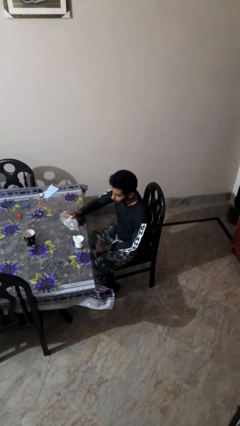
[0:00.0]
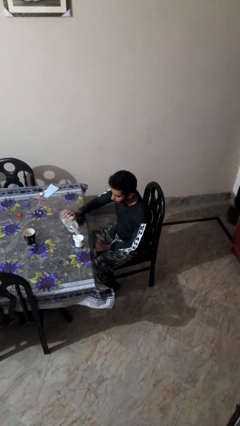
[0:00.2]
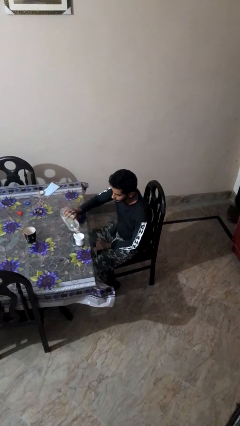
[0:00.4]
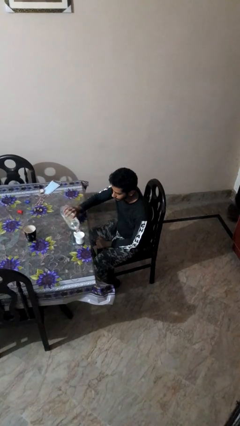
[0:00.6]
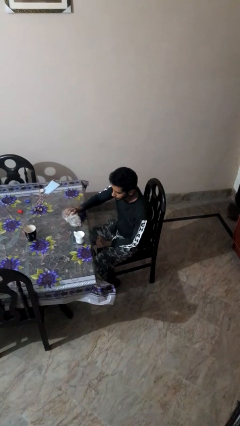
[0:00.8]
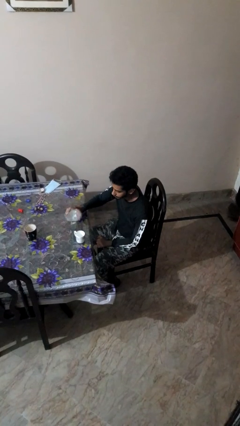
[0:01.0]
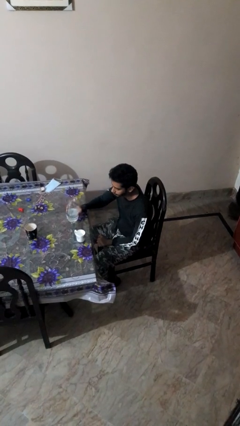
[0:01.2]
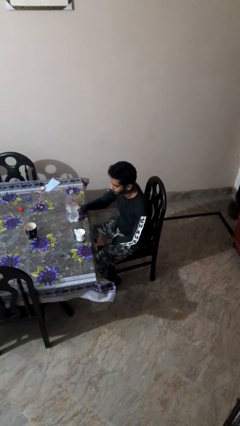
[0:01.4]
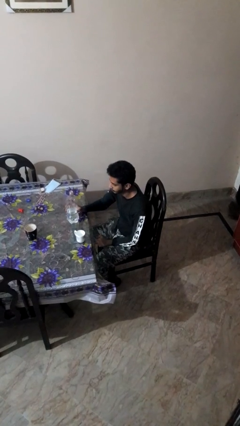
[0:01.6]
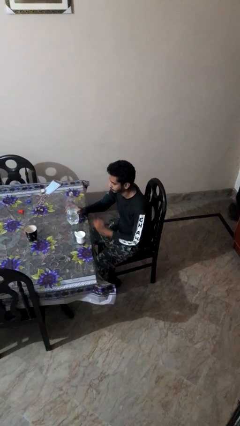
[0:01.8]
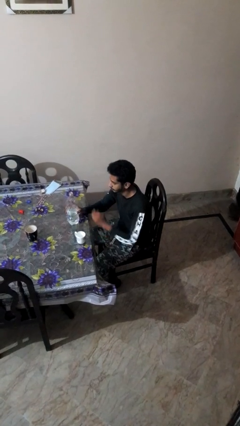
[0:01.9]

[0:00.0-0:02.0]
person pours liquid into cup

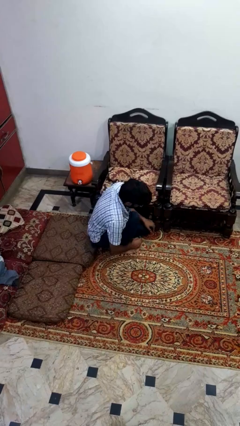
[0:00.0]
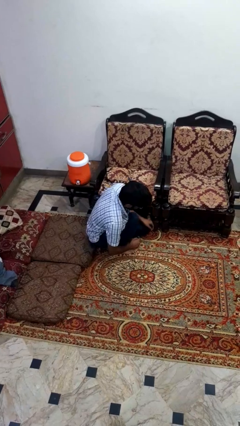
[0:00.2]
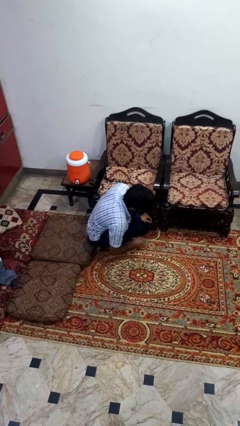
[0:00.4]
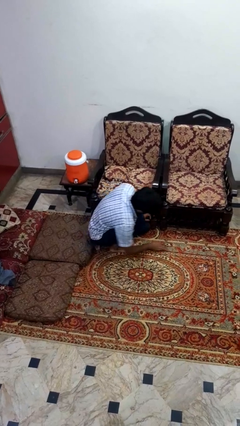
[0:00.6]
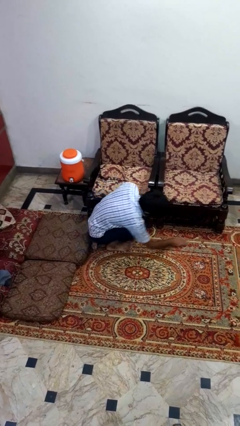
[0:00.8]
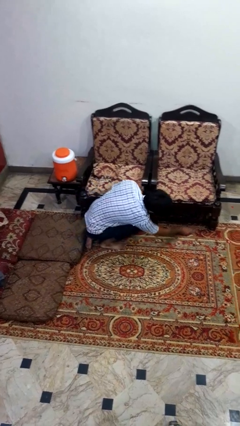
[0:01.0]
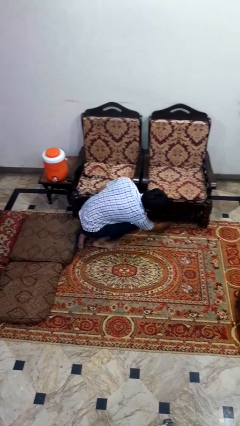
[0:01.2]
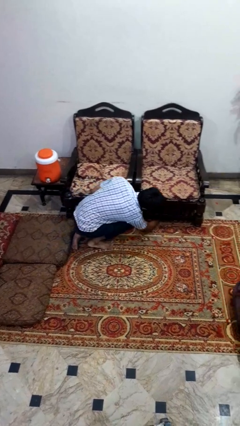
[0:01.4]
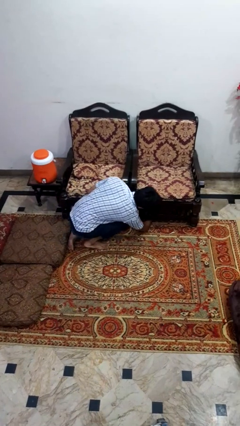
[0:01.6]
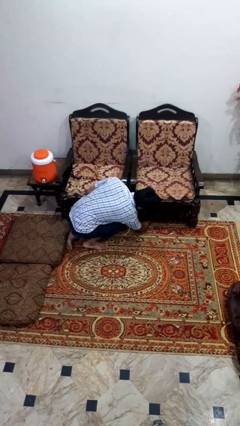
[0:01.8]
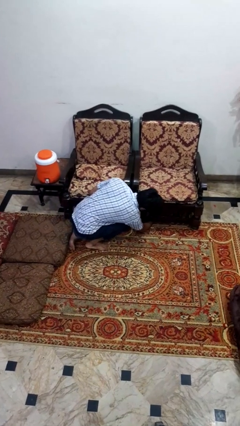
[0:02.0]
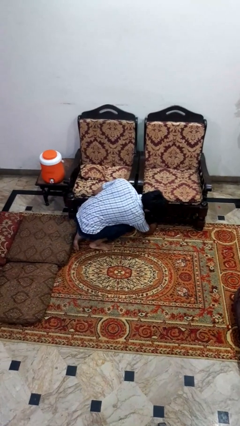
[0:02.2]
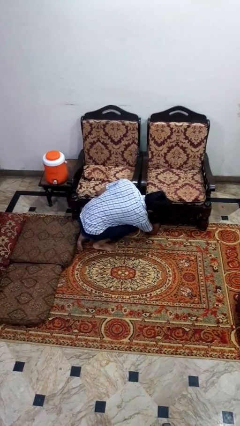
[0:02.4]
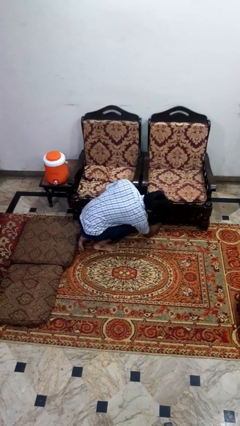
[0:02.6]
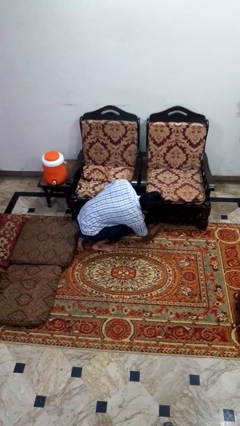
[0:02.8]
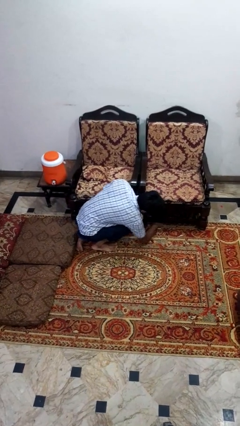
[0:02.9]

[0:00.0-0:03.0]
person searches under couch

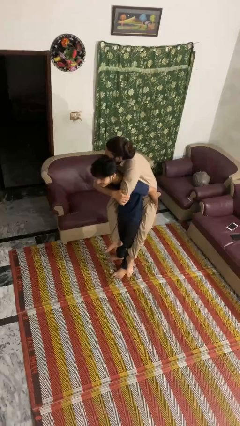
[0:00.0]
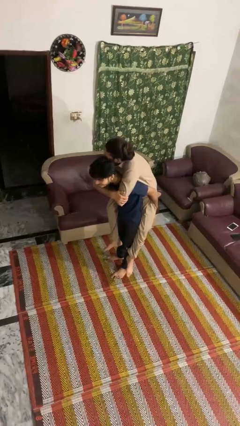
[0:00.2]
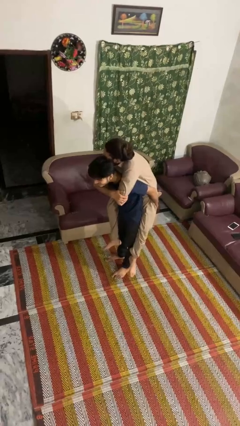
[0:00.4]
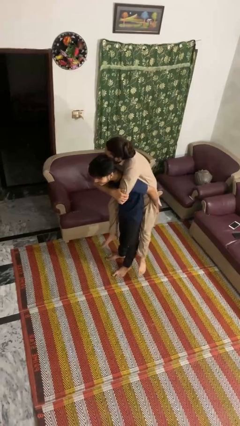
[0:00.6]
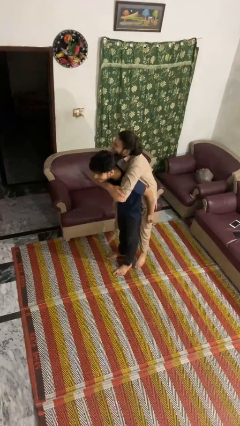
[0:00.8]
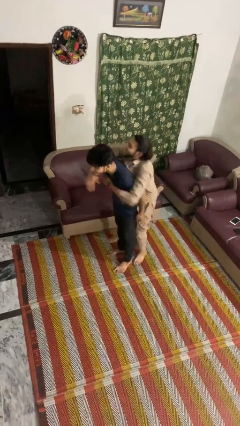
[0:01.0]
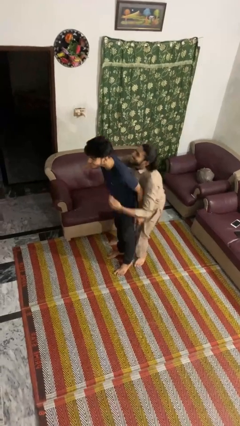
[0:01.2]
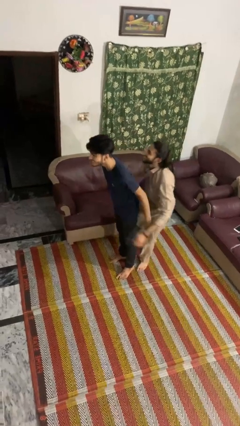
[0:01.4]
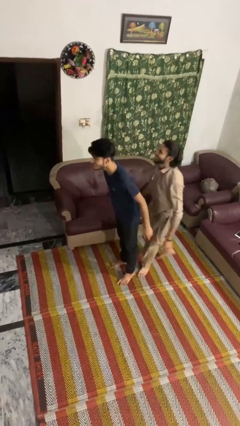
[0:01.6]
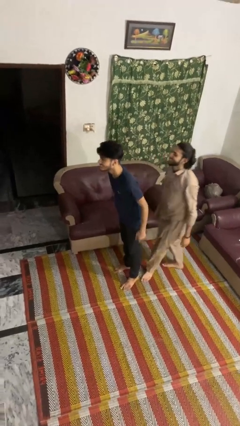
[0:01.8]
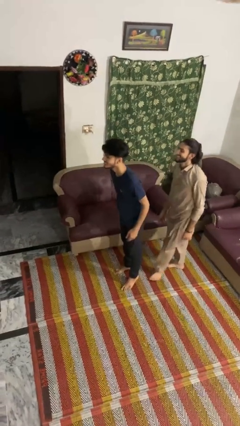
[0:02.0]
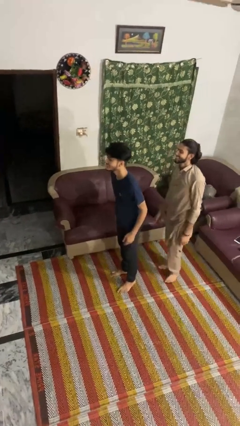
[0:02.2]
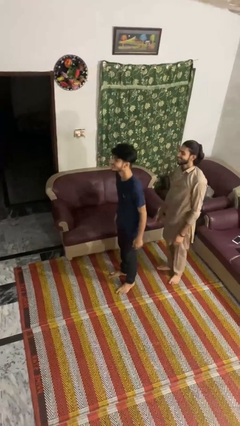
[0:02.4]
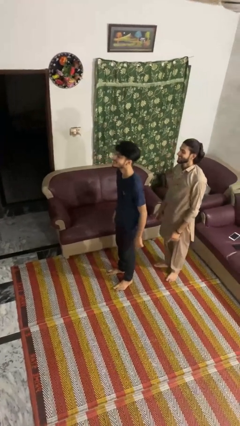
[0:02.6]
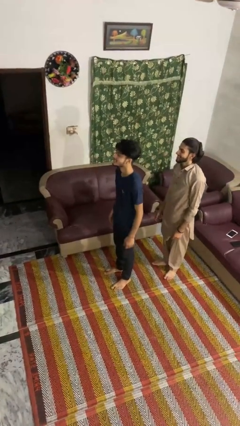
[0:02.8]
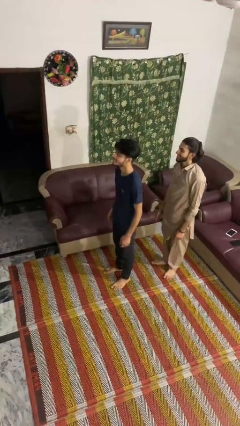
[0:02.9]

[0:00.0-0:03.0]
person puts down person

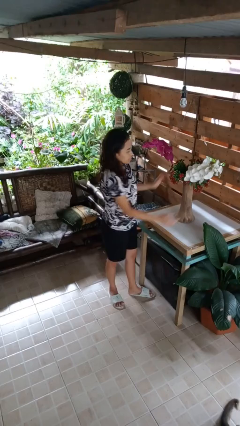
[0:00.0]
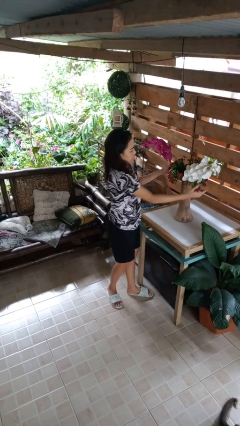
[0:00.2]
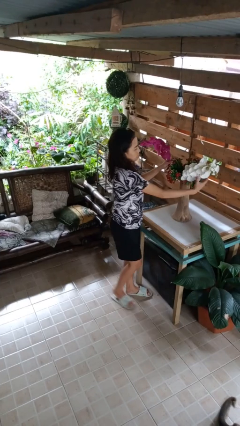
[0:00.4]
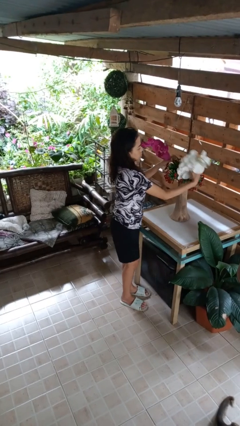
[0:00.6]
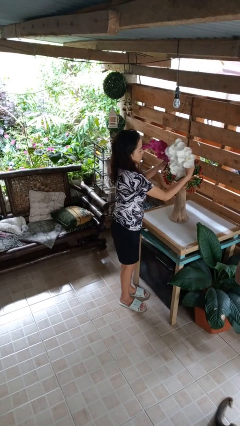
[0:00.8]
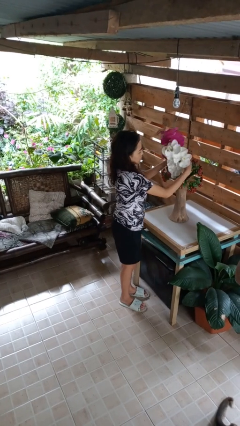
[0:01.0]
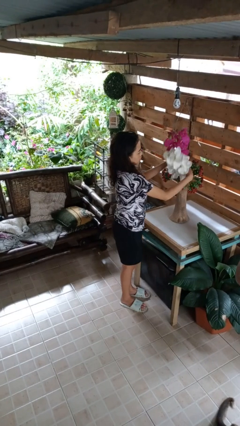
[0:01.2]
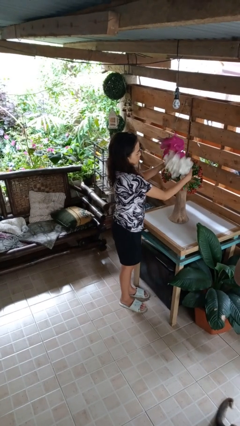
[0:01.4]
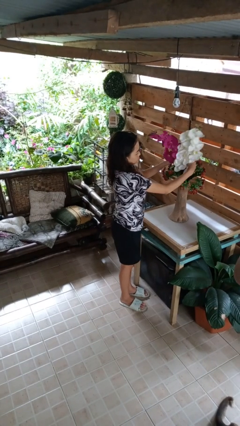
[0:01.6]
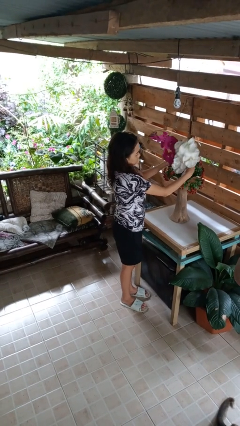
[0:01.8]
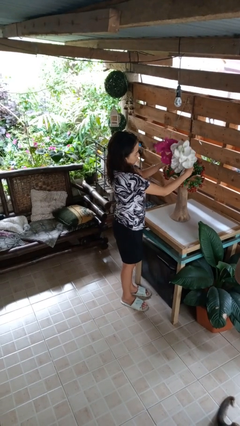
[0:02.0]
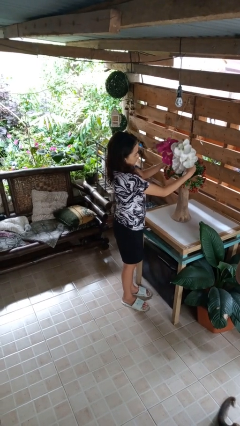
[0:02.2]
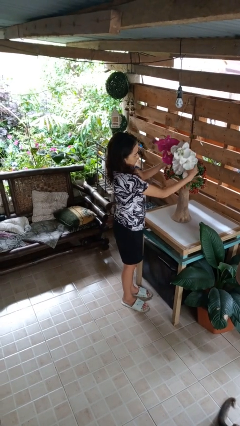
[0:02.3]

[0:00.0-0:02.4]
person arranges flowers in vase

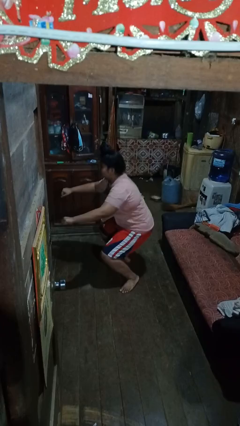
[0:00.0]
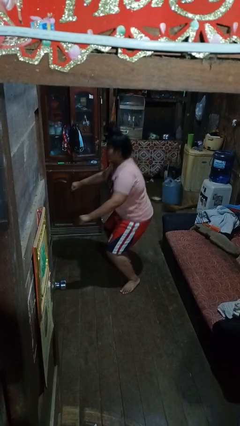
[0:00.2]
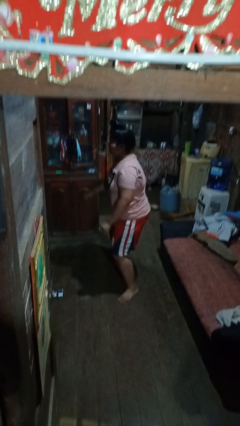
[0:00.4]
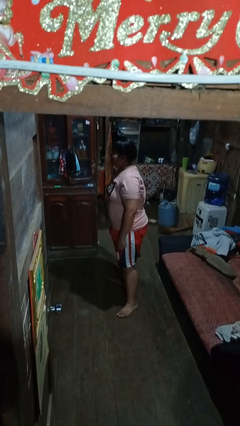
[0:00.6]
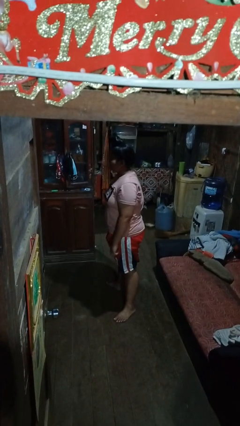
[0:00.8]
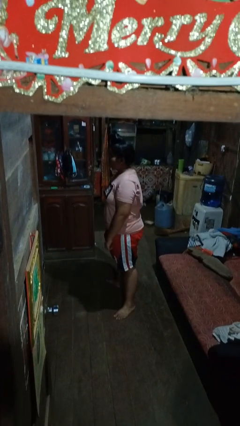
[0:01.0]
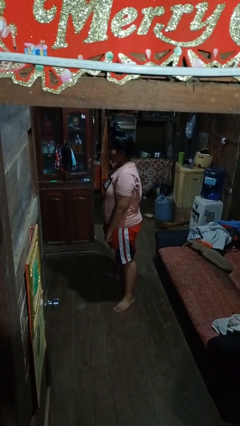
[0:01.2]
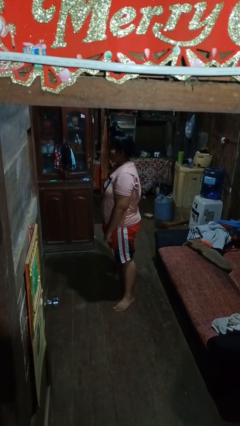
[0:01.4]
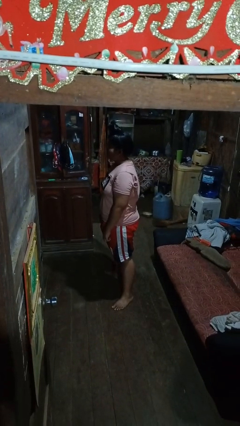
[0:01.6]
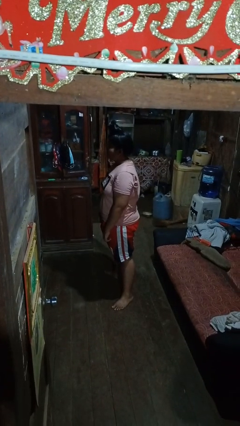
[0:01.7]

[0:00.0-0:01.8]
person stands up

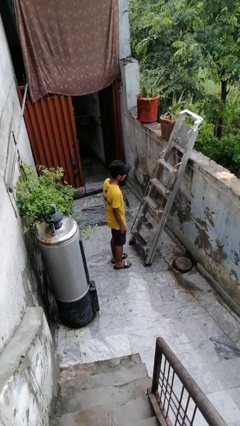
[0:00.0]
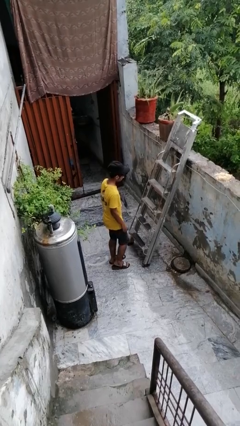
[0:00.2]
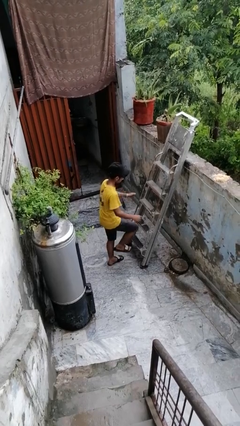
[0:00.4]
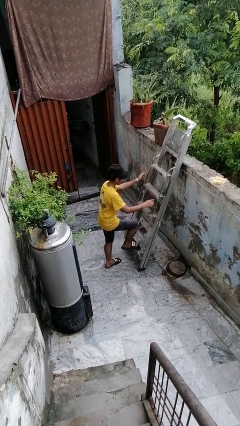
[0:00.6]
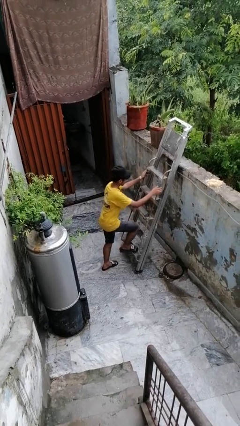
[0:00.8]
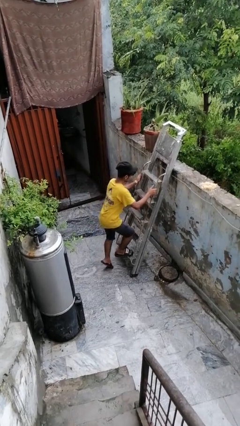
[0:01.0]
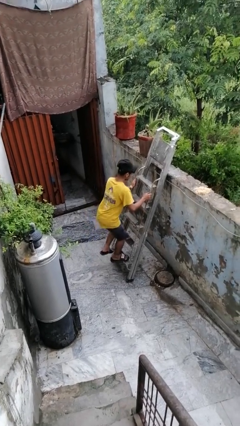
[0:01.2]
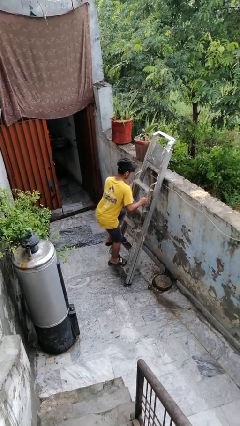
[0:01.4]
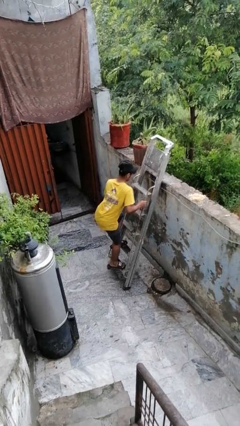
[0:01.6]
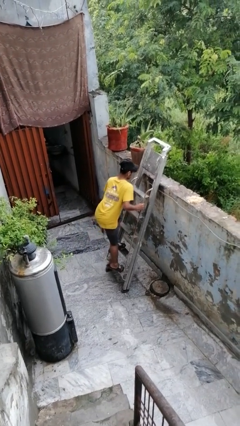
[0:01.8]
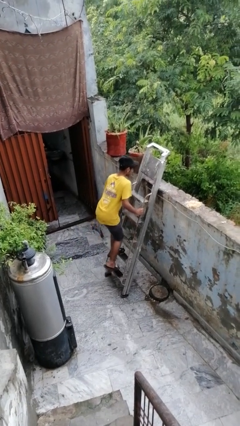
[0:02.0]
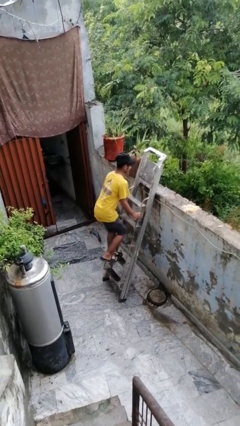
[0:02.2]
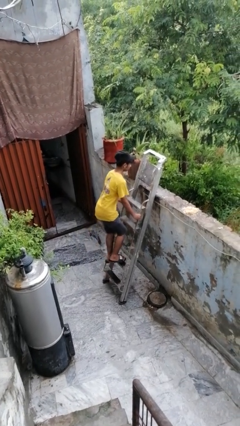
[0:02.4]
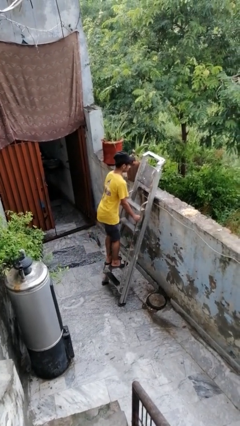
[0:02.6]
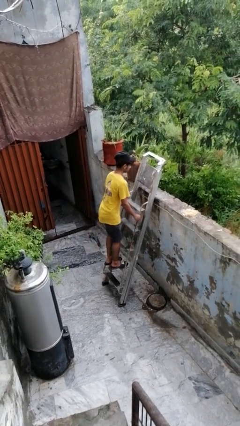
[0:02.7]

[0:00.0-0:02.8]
person climbs up ladder

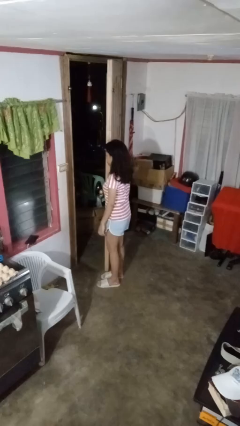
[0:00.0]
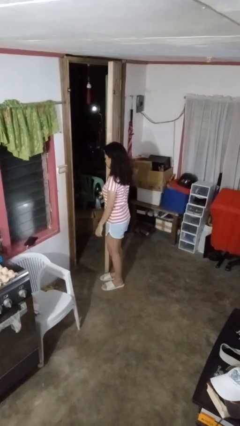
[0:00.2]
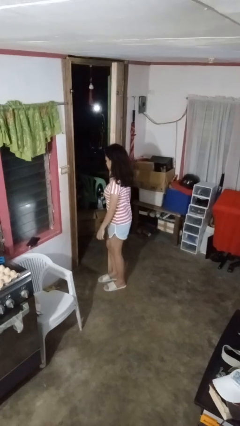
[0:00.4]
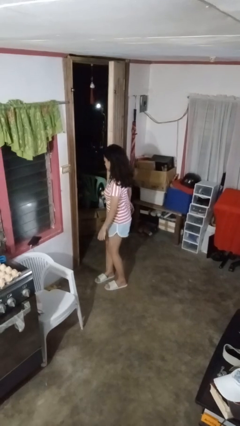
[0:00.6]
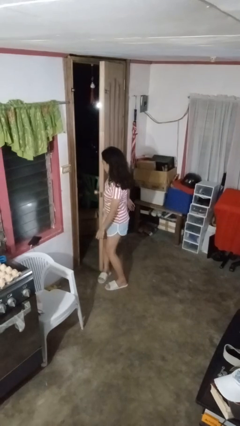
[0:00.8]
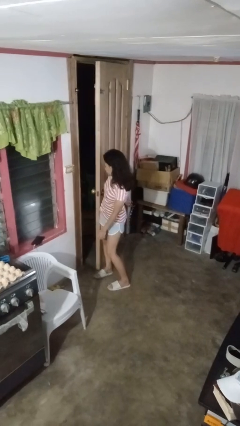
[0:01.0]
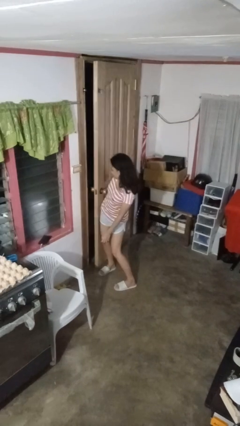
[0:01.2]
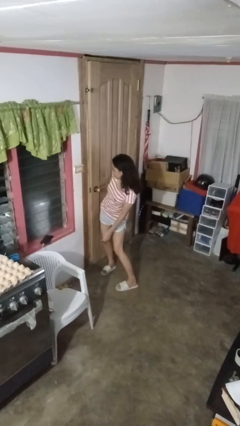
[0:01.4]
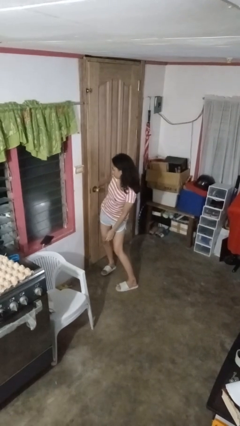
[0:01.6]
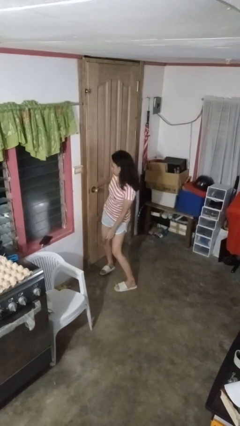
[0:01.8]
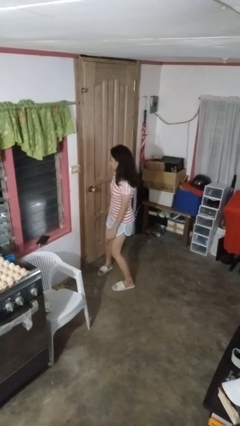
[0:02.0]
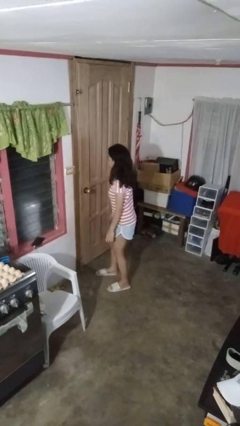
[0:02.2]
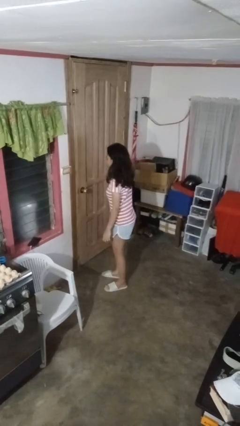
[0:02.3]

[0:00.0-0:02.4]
person closes door with hip
